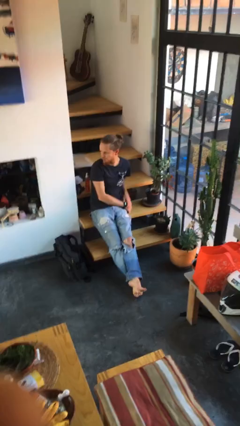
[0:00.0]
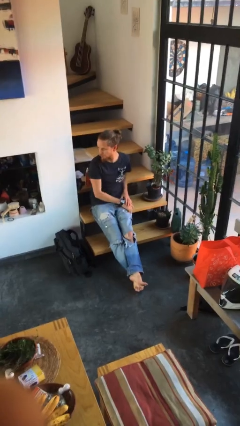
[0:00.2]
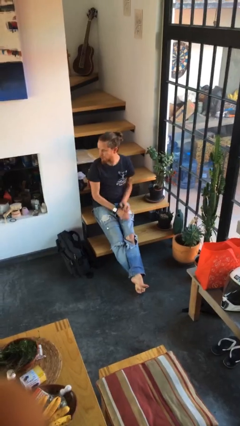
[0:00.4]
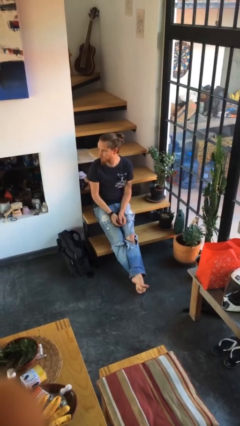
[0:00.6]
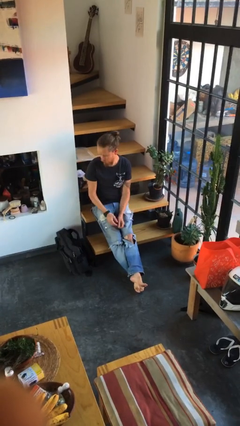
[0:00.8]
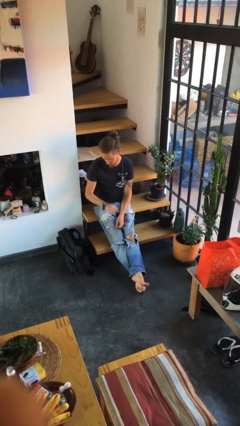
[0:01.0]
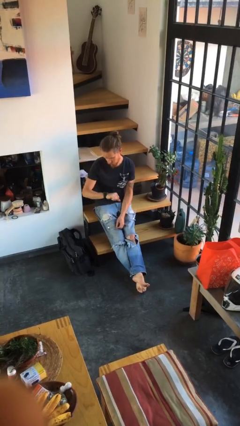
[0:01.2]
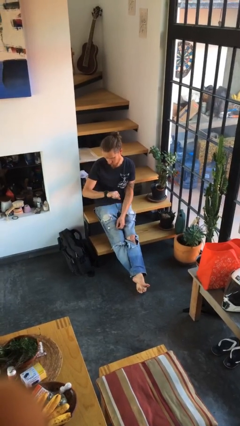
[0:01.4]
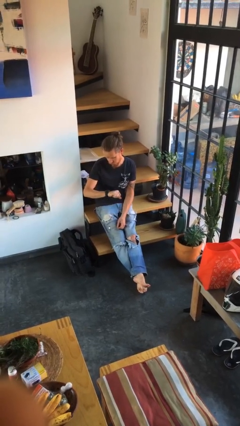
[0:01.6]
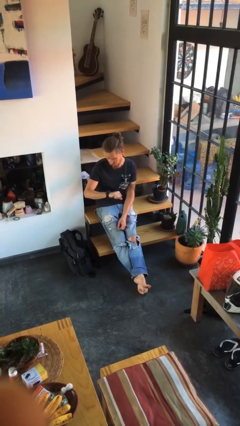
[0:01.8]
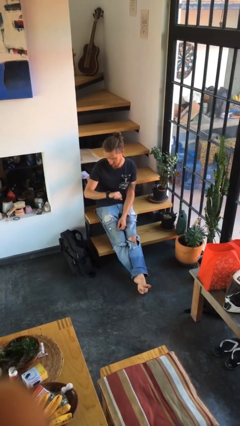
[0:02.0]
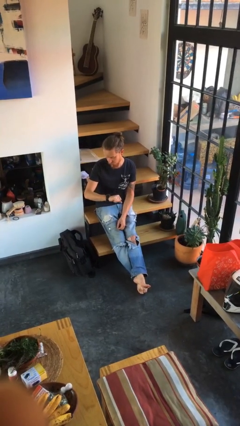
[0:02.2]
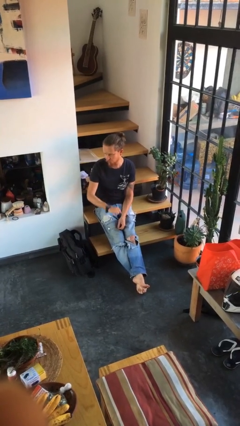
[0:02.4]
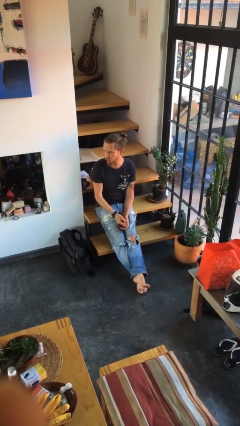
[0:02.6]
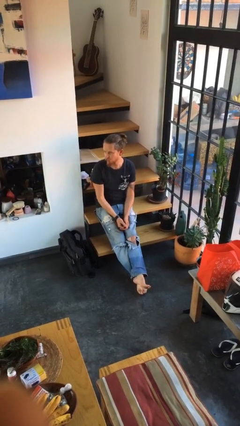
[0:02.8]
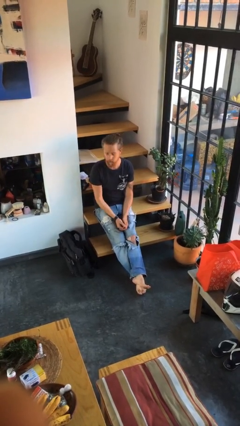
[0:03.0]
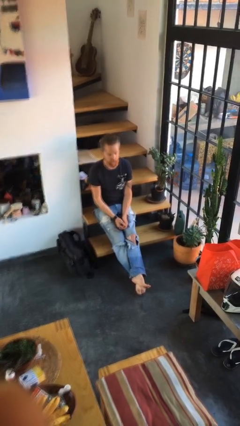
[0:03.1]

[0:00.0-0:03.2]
person looks at wristwatch

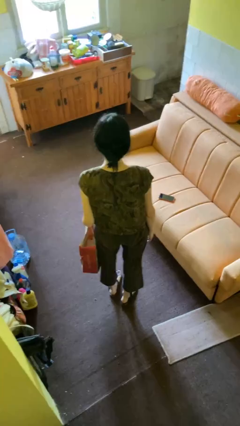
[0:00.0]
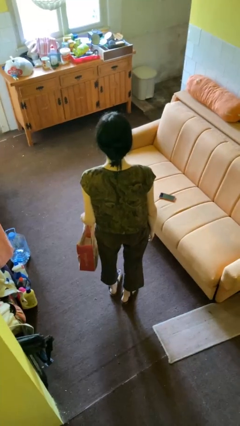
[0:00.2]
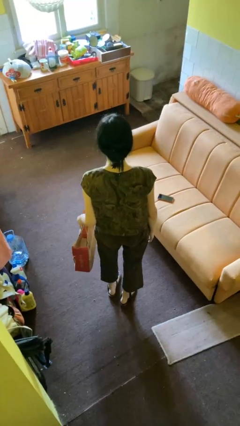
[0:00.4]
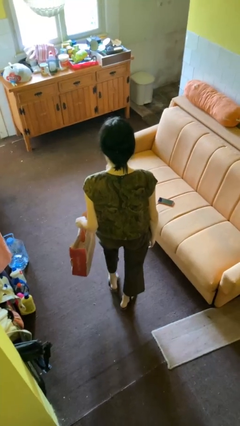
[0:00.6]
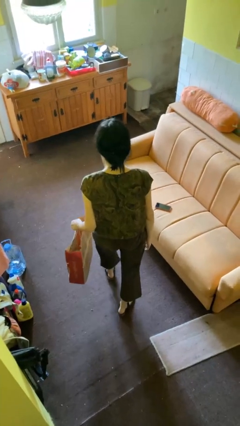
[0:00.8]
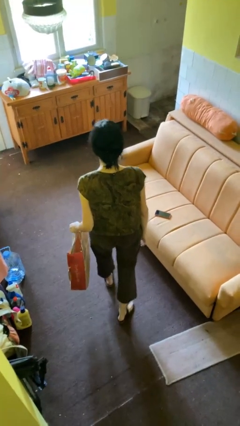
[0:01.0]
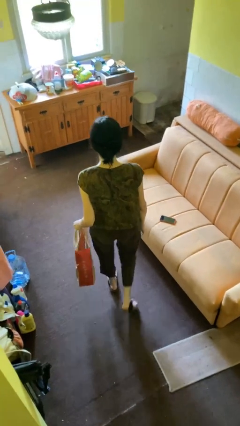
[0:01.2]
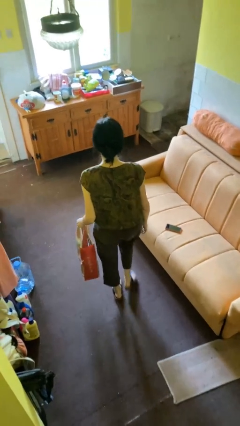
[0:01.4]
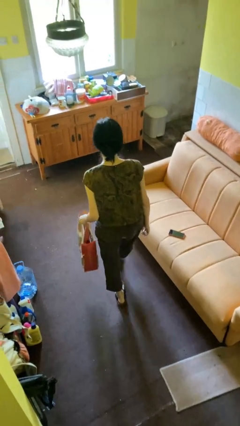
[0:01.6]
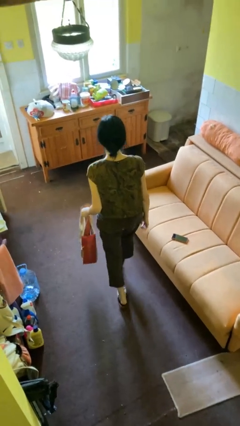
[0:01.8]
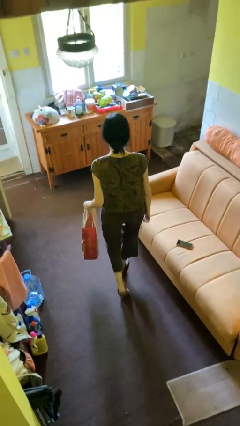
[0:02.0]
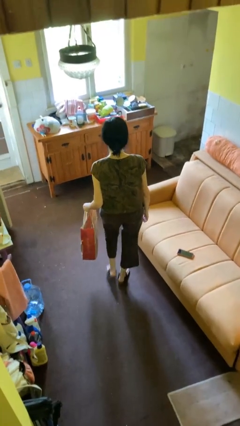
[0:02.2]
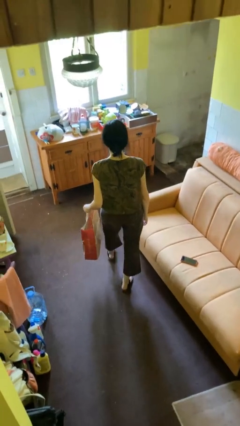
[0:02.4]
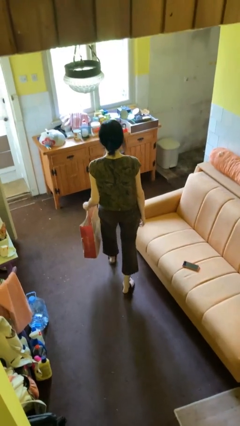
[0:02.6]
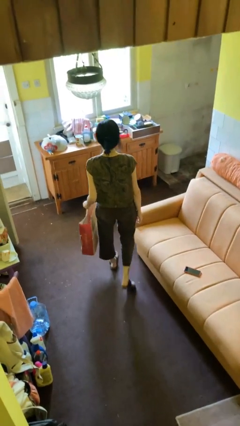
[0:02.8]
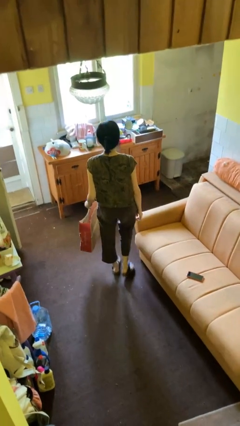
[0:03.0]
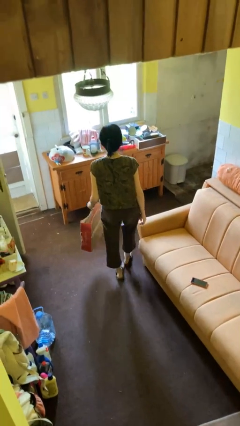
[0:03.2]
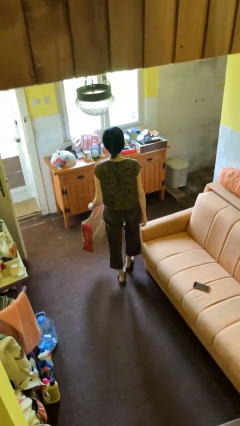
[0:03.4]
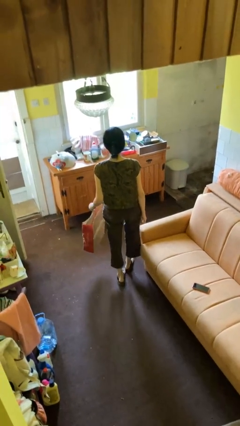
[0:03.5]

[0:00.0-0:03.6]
person carries groceries

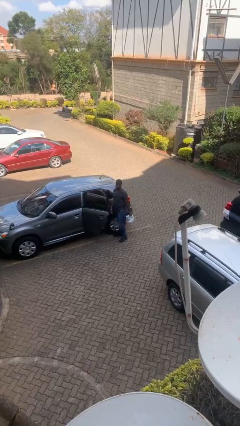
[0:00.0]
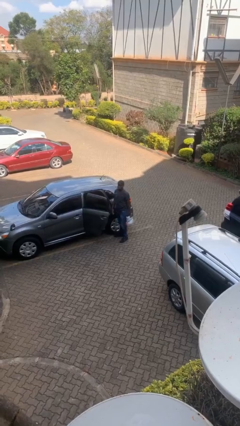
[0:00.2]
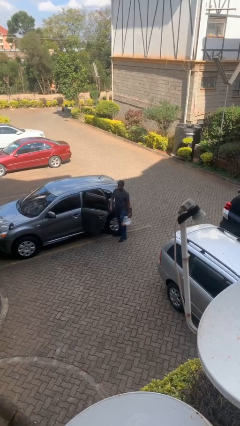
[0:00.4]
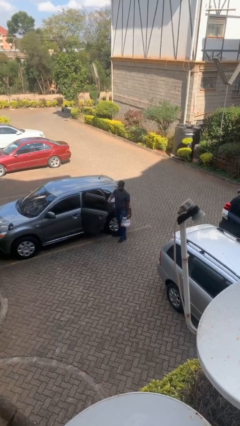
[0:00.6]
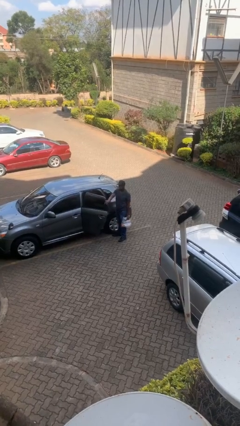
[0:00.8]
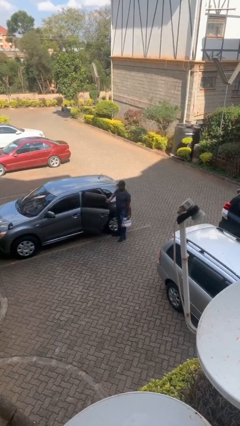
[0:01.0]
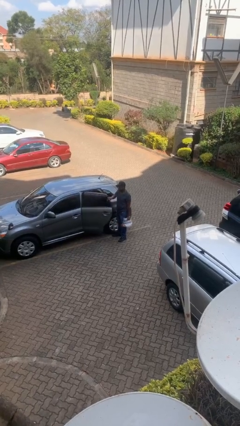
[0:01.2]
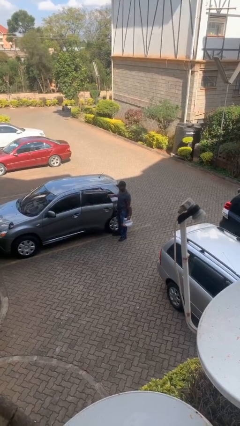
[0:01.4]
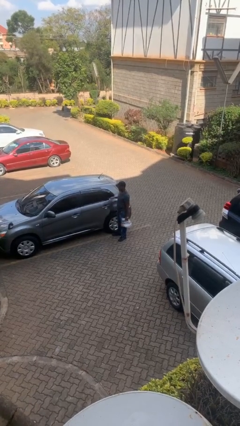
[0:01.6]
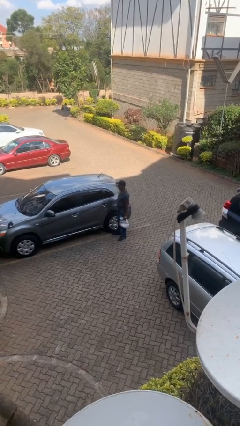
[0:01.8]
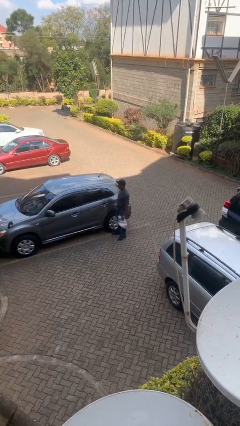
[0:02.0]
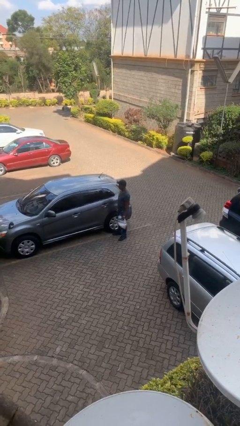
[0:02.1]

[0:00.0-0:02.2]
person closes car door

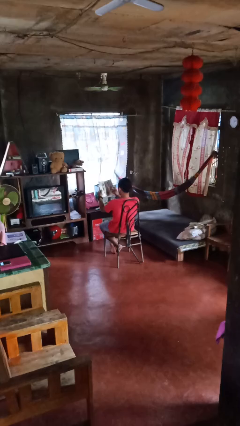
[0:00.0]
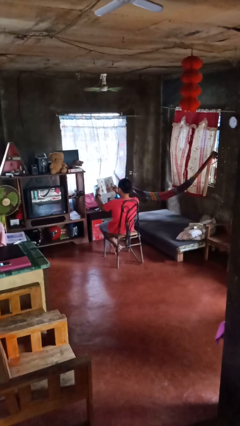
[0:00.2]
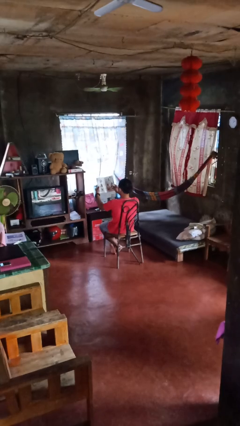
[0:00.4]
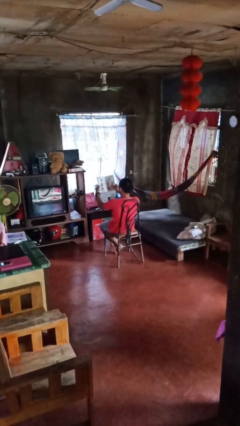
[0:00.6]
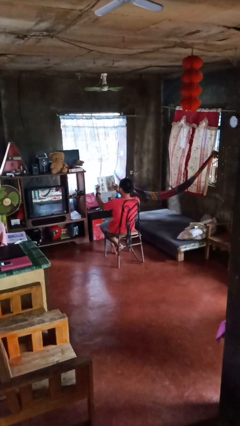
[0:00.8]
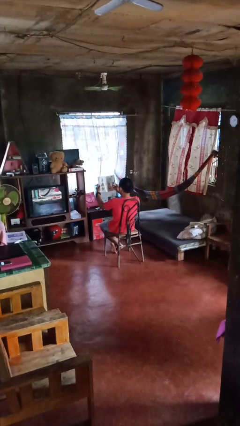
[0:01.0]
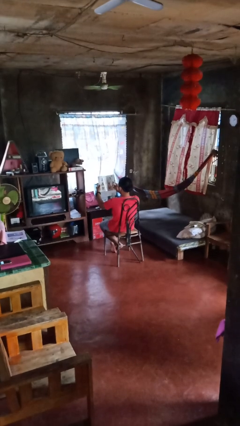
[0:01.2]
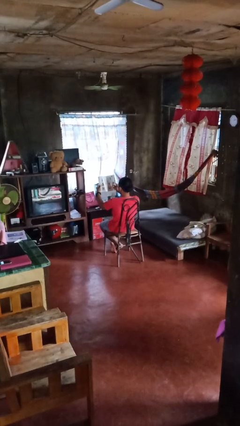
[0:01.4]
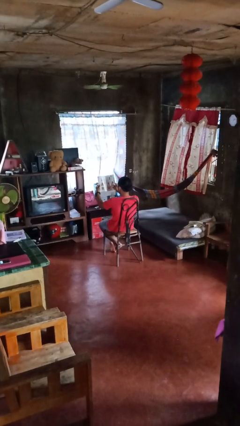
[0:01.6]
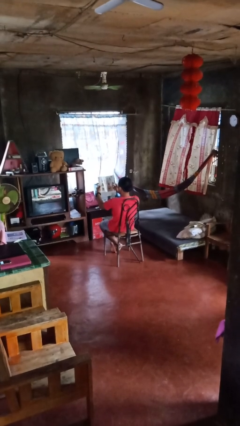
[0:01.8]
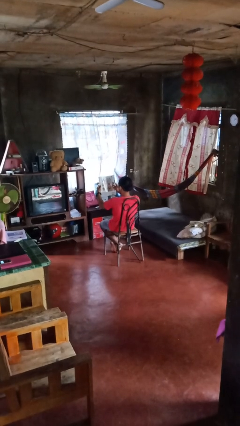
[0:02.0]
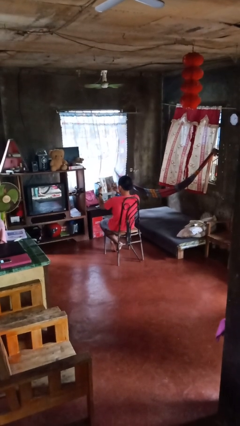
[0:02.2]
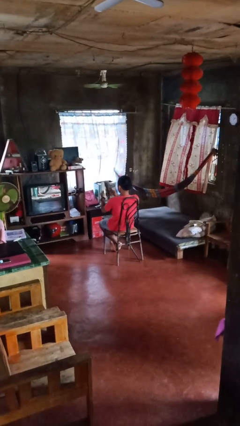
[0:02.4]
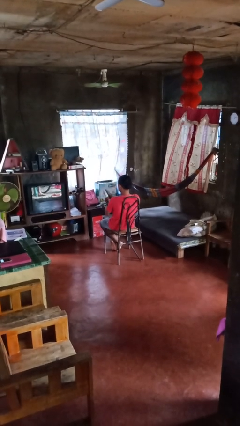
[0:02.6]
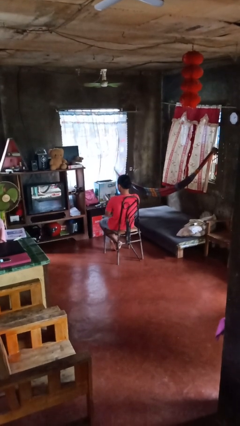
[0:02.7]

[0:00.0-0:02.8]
person reads magazine

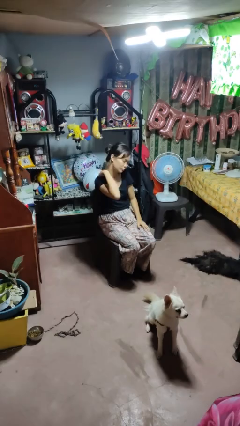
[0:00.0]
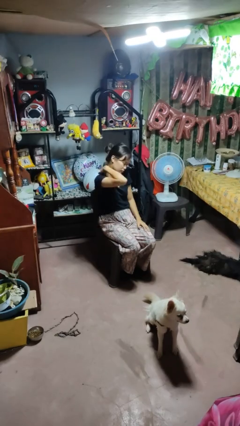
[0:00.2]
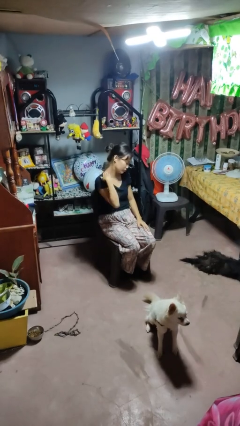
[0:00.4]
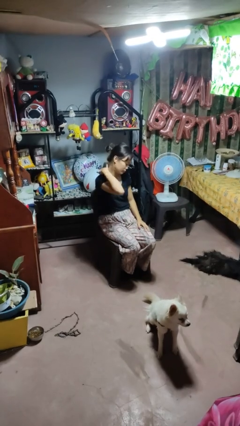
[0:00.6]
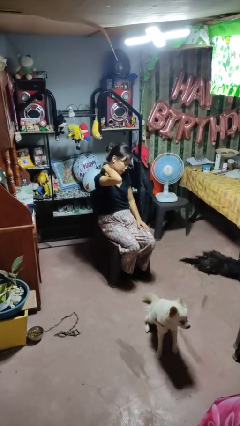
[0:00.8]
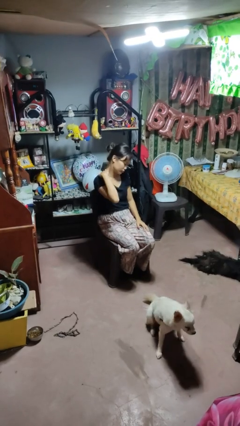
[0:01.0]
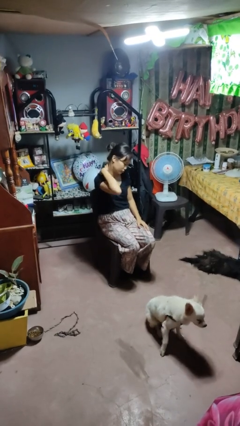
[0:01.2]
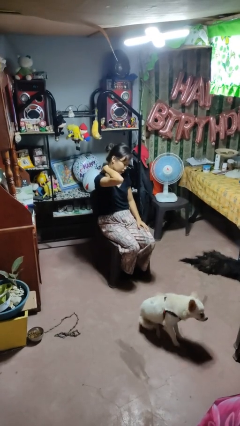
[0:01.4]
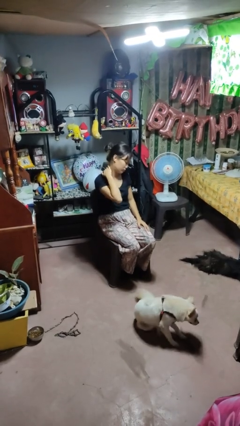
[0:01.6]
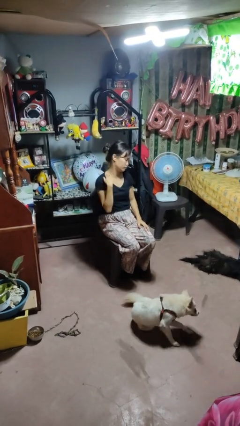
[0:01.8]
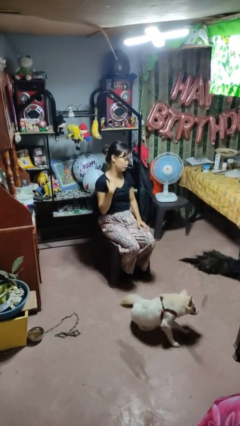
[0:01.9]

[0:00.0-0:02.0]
person rubs neck

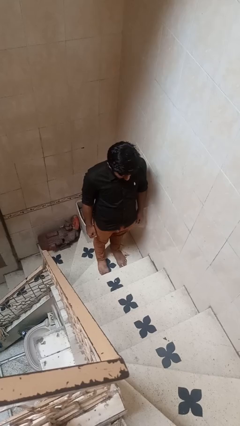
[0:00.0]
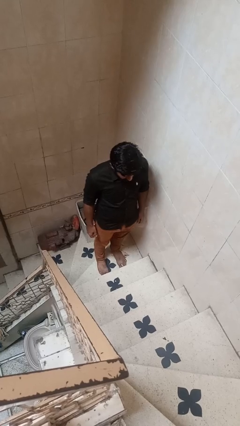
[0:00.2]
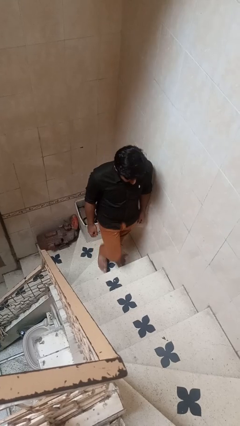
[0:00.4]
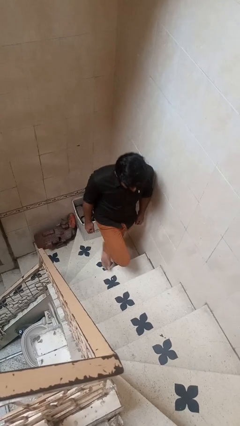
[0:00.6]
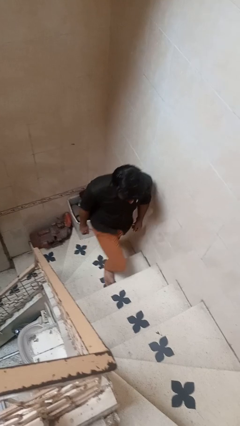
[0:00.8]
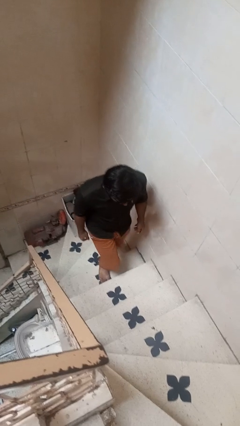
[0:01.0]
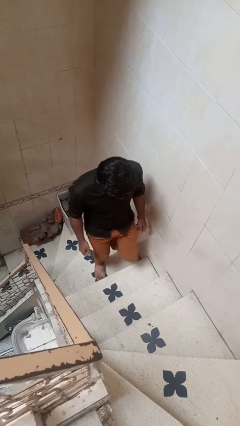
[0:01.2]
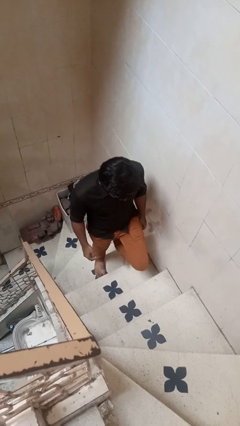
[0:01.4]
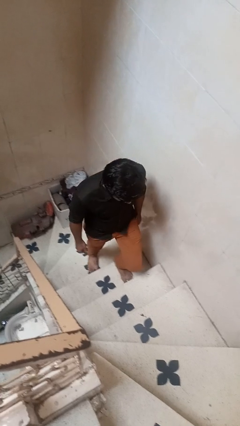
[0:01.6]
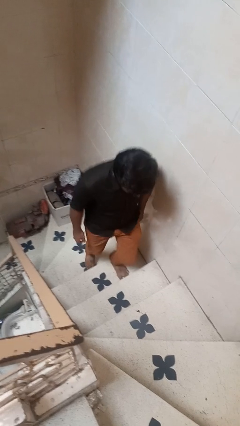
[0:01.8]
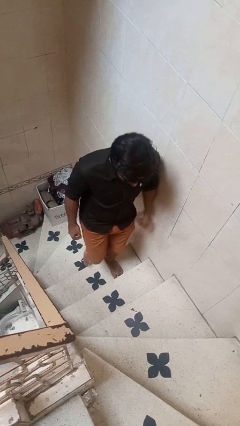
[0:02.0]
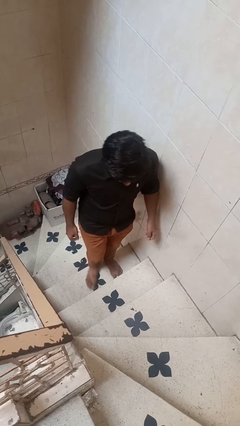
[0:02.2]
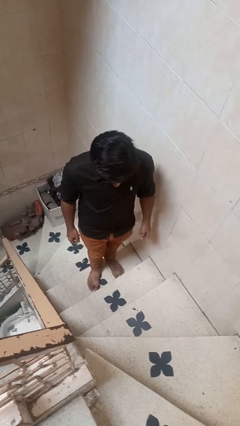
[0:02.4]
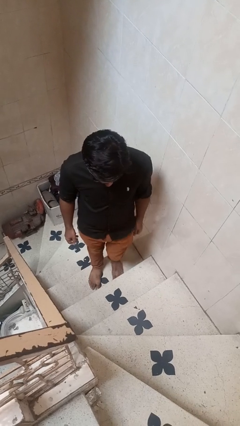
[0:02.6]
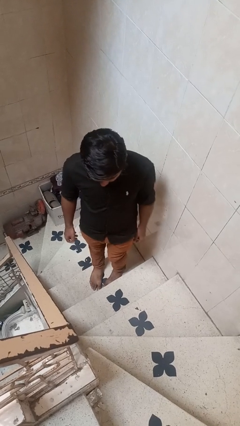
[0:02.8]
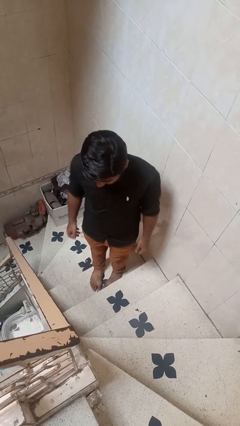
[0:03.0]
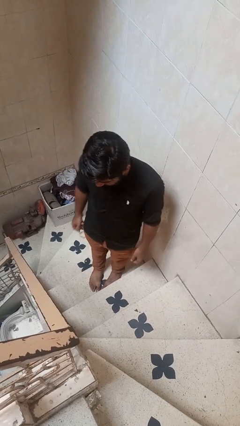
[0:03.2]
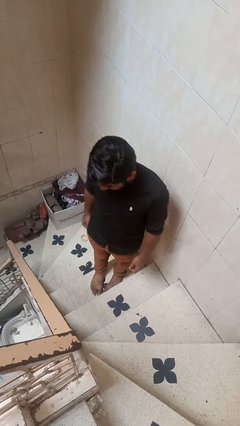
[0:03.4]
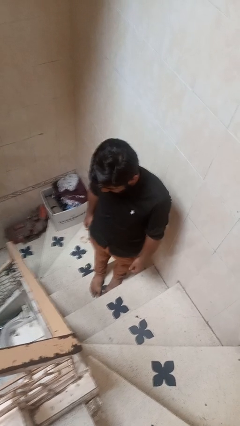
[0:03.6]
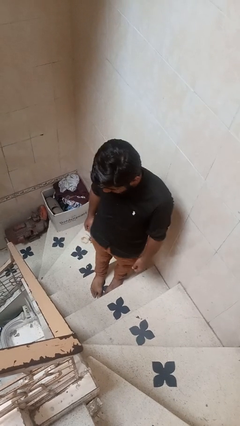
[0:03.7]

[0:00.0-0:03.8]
person climbs up stairs
